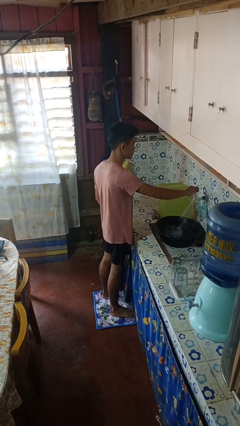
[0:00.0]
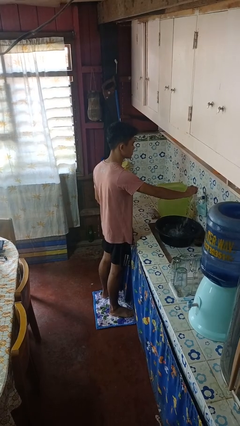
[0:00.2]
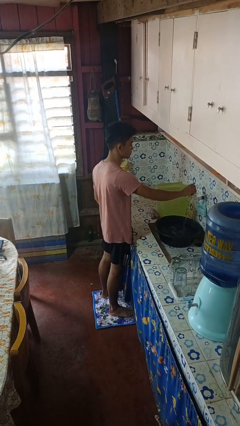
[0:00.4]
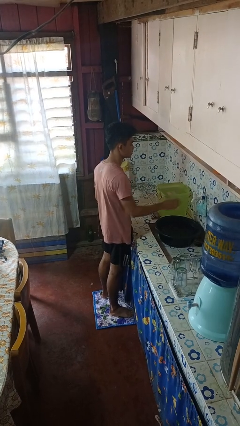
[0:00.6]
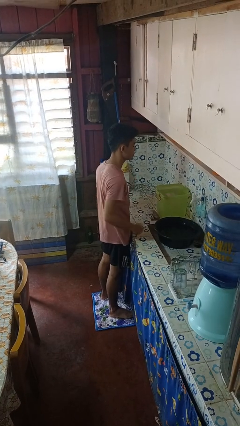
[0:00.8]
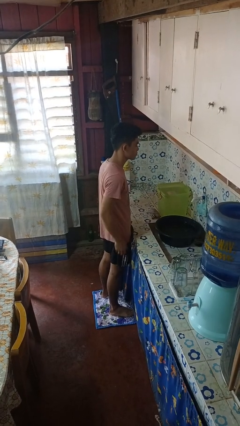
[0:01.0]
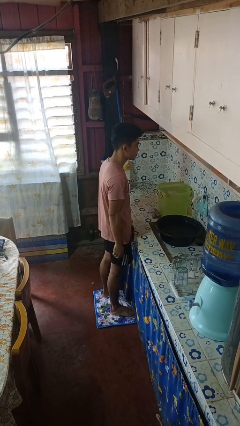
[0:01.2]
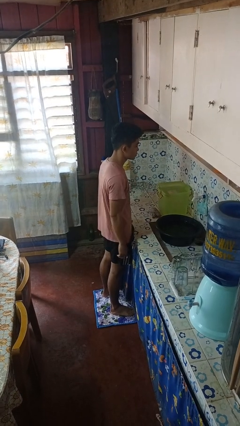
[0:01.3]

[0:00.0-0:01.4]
person turns off faucet

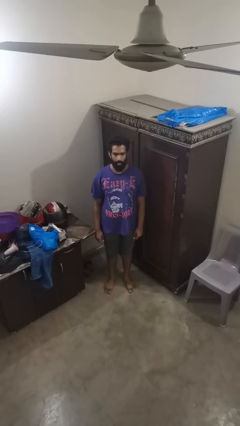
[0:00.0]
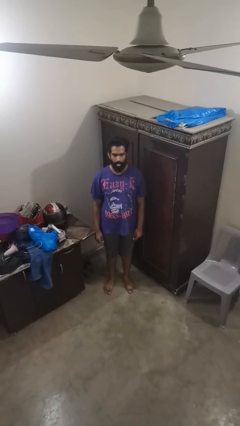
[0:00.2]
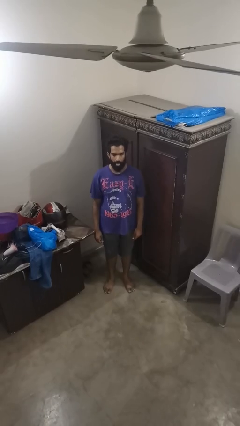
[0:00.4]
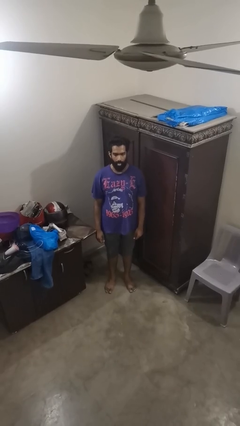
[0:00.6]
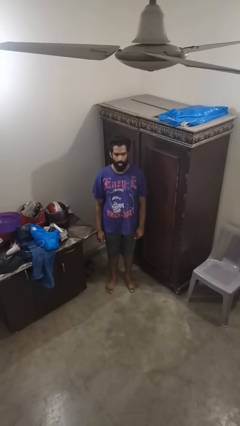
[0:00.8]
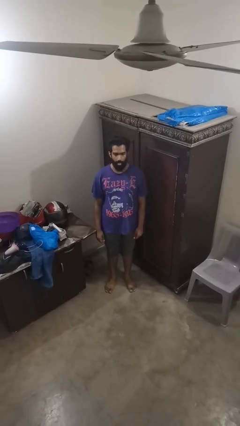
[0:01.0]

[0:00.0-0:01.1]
person sticks out tongue

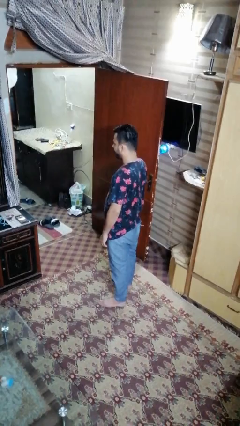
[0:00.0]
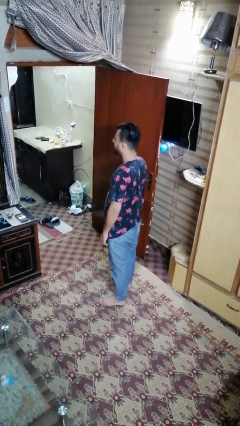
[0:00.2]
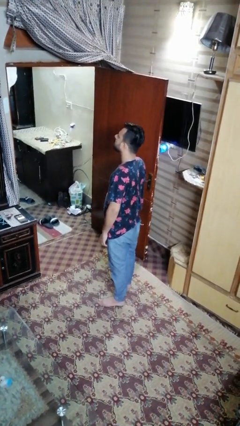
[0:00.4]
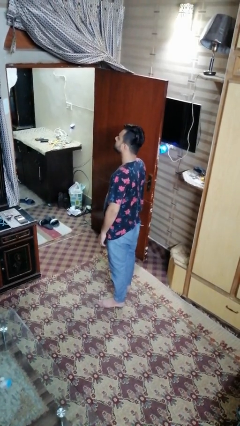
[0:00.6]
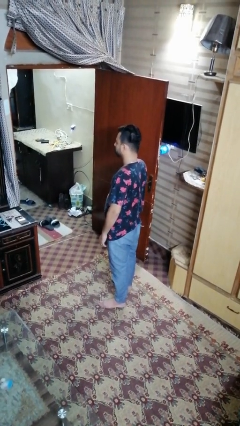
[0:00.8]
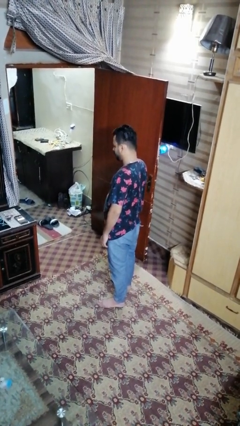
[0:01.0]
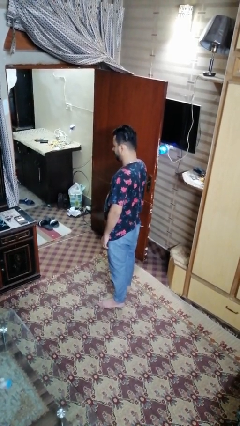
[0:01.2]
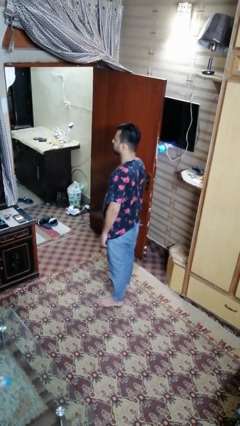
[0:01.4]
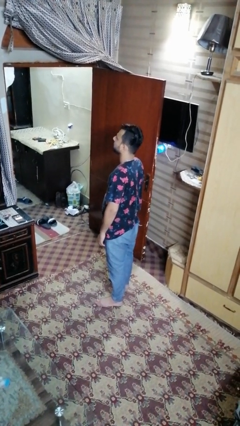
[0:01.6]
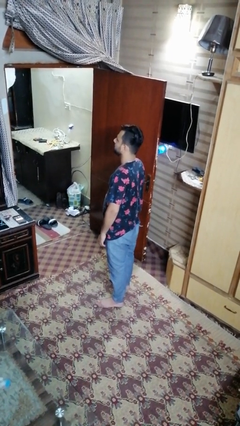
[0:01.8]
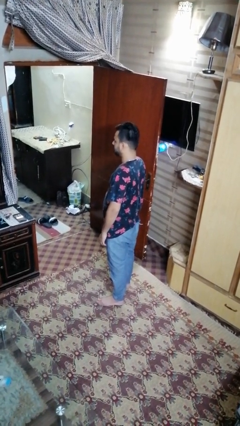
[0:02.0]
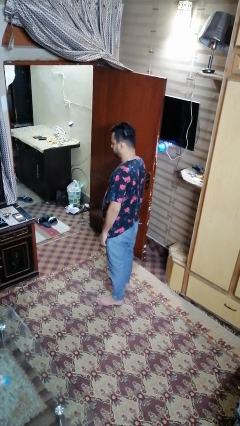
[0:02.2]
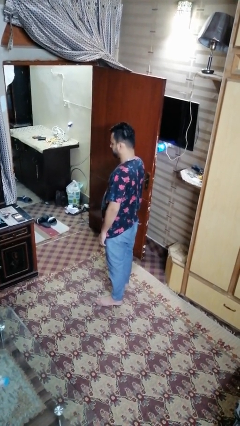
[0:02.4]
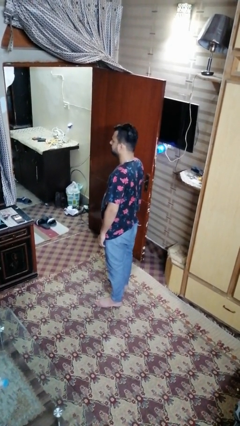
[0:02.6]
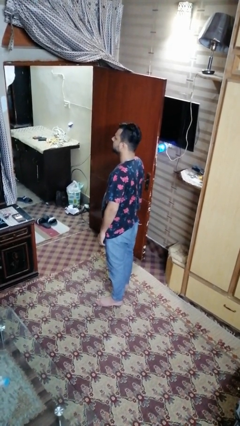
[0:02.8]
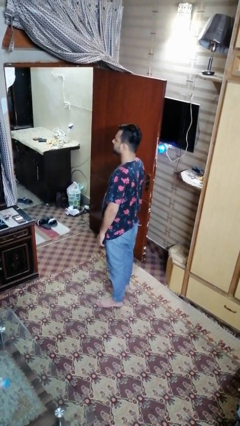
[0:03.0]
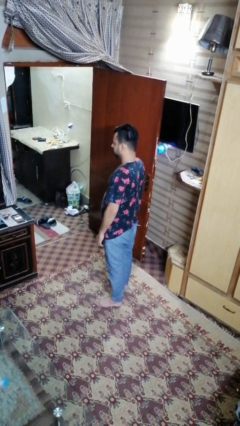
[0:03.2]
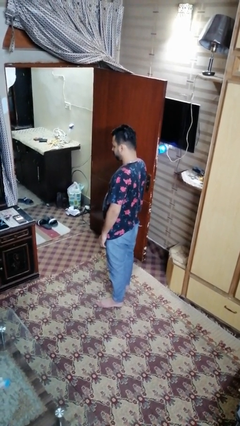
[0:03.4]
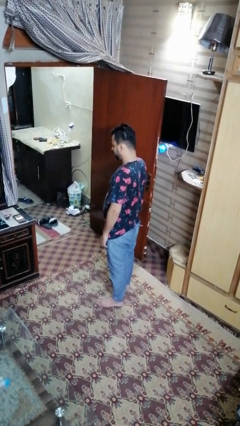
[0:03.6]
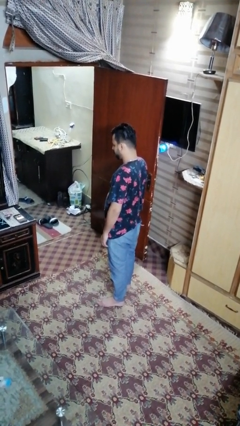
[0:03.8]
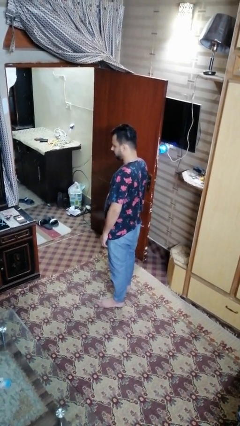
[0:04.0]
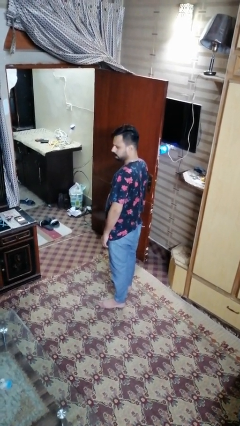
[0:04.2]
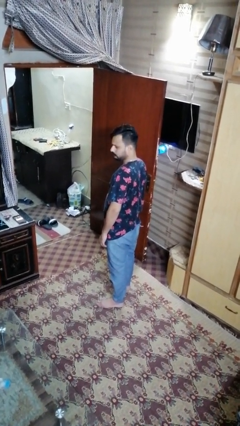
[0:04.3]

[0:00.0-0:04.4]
person nods head

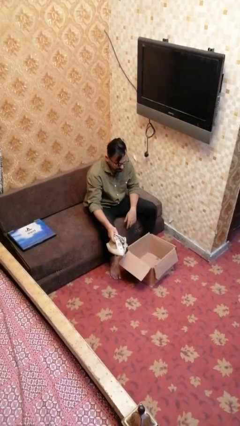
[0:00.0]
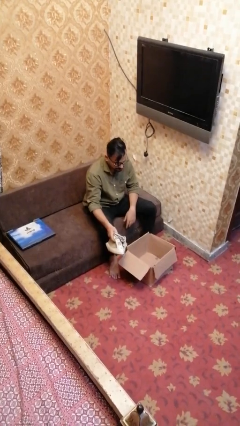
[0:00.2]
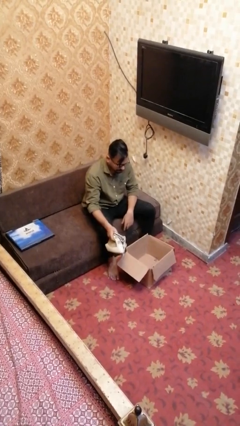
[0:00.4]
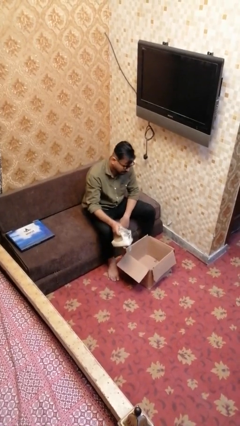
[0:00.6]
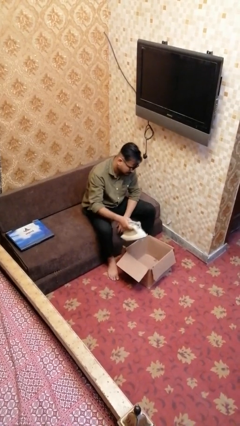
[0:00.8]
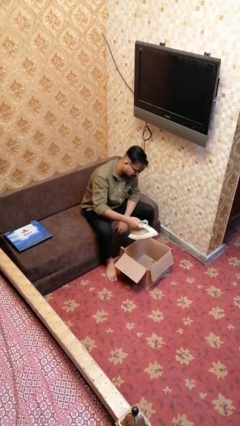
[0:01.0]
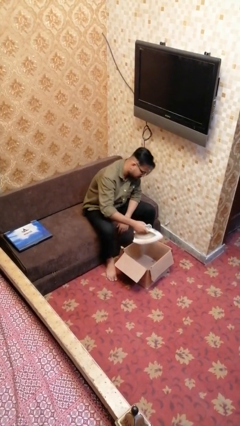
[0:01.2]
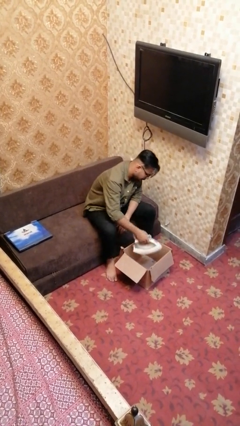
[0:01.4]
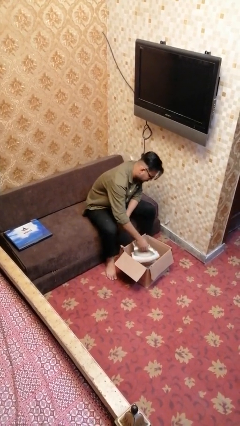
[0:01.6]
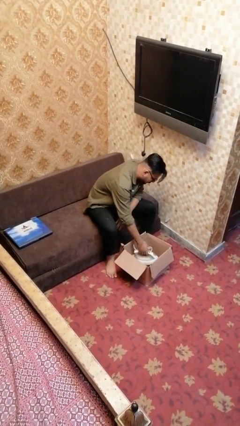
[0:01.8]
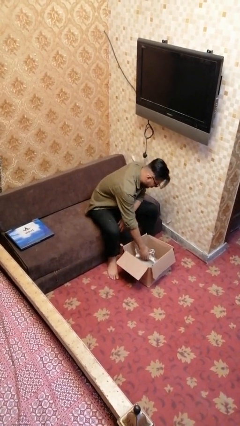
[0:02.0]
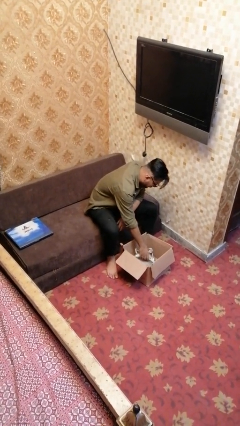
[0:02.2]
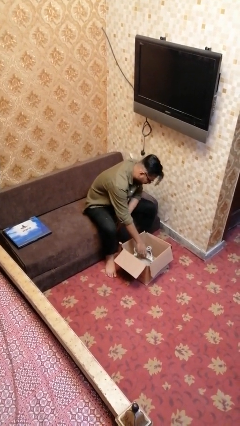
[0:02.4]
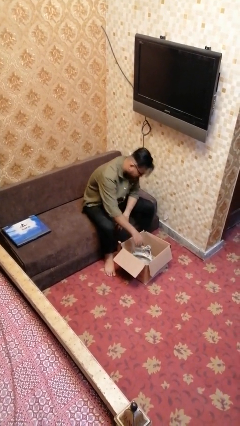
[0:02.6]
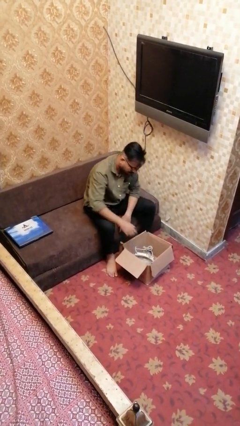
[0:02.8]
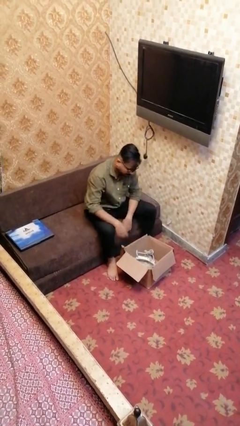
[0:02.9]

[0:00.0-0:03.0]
person puts object into box

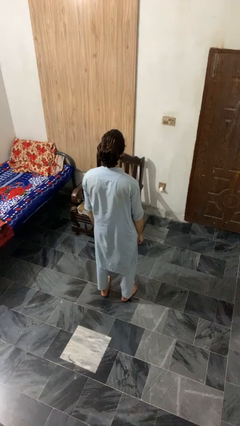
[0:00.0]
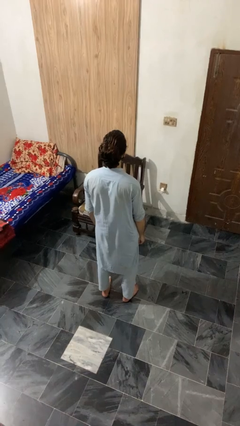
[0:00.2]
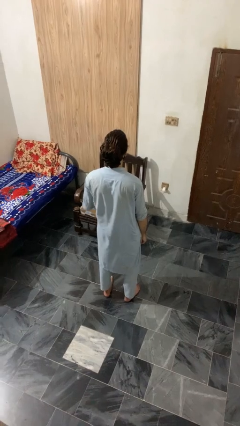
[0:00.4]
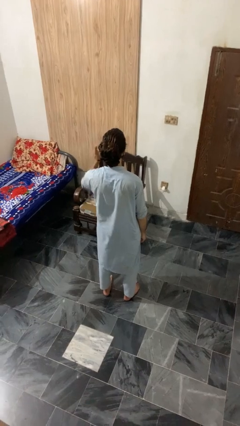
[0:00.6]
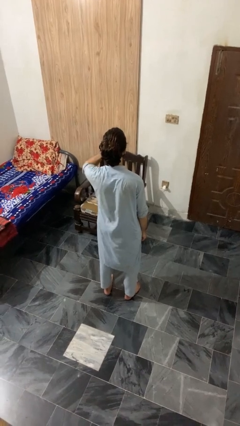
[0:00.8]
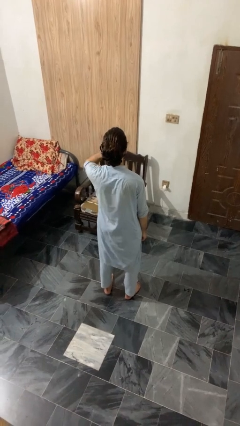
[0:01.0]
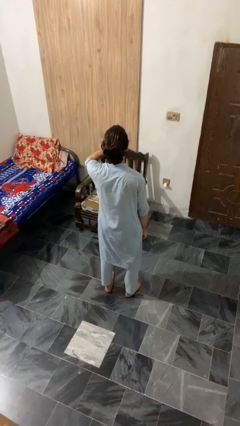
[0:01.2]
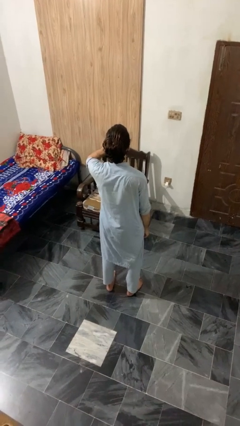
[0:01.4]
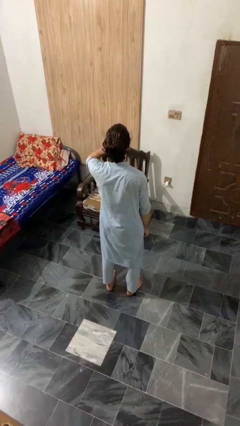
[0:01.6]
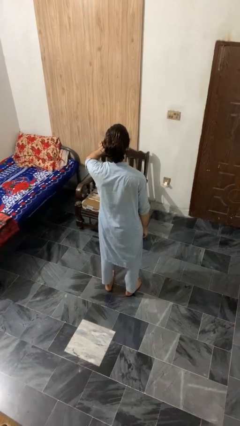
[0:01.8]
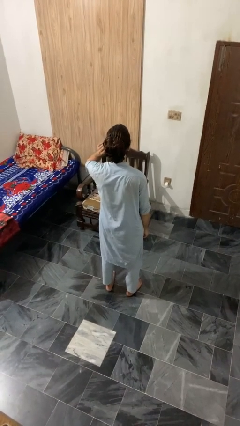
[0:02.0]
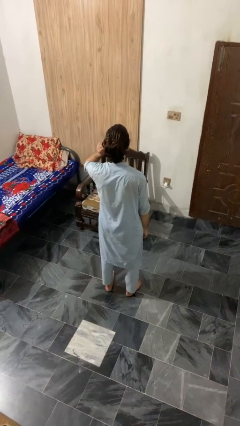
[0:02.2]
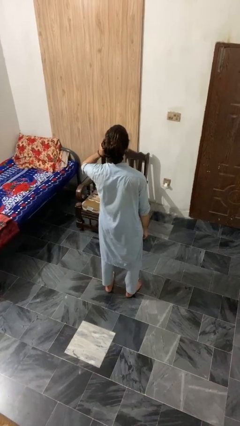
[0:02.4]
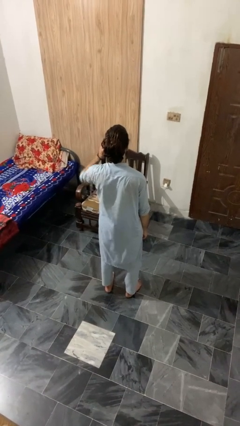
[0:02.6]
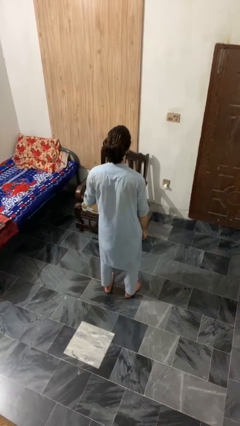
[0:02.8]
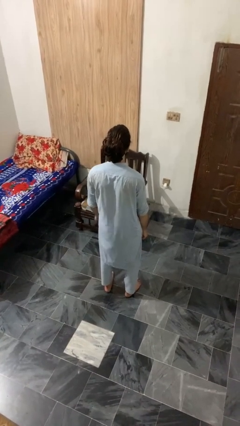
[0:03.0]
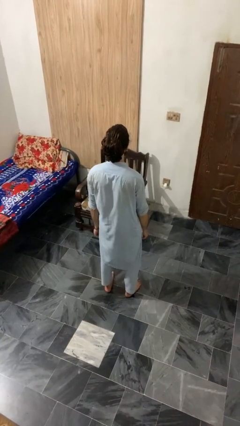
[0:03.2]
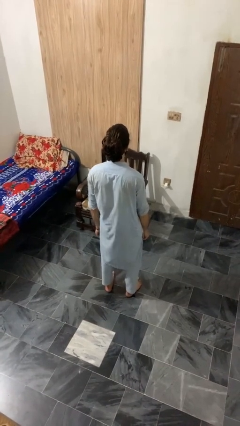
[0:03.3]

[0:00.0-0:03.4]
person touches earlobe

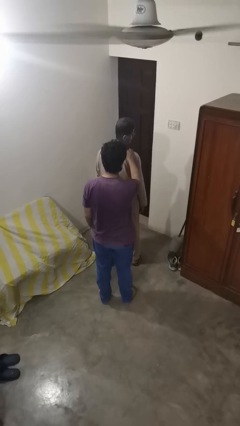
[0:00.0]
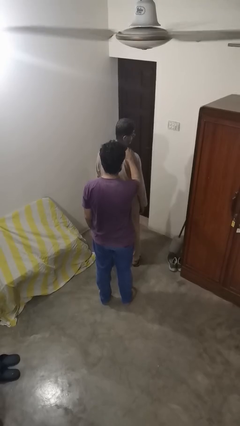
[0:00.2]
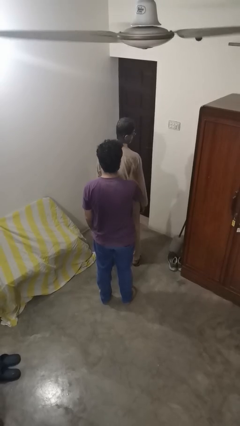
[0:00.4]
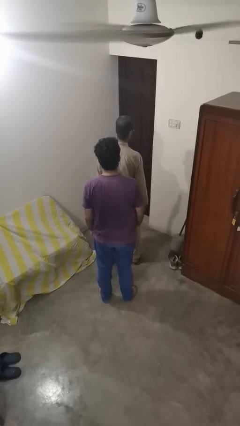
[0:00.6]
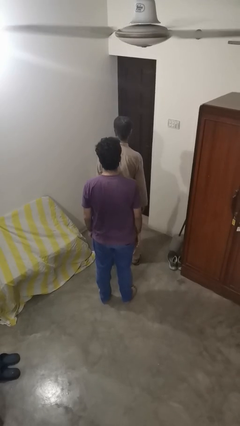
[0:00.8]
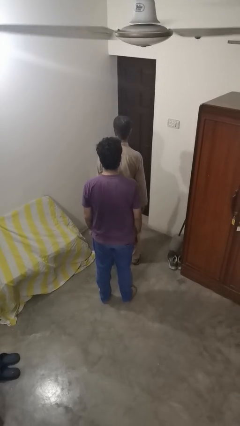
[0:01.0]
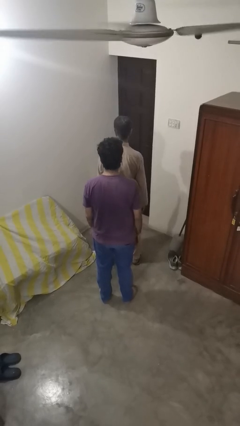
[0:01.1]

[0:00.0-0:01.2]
person spins person around

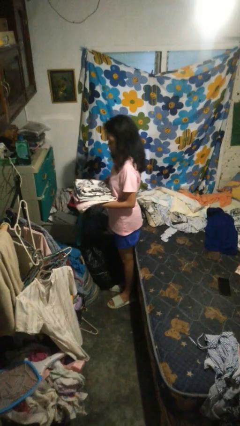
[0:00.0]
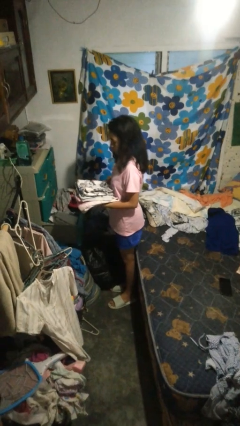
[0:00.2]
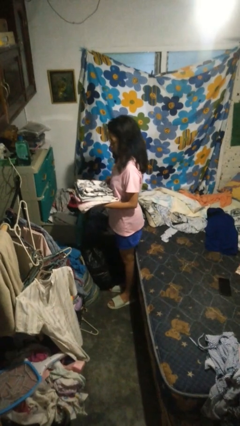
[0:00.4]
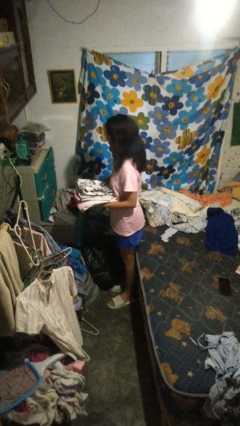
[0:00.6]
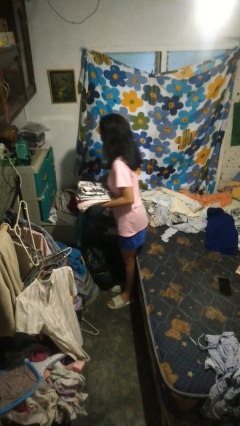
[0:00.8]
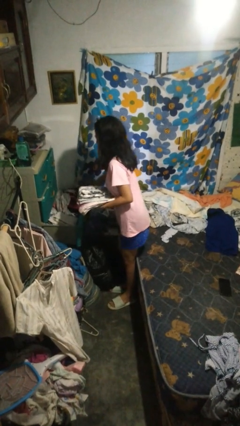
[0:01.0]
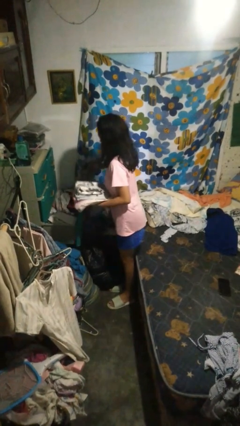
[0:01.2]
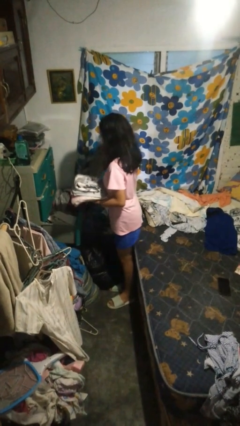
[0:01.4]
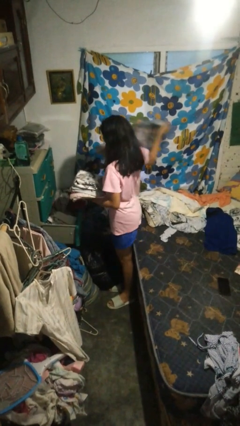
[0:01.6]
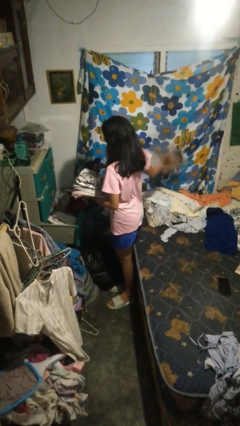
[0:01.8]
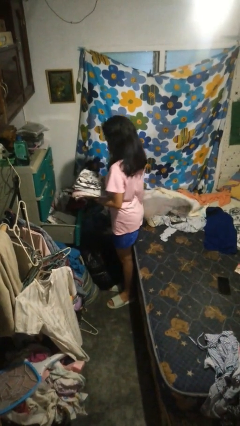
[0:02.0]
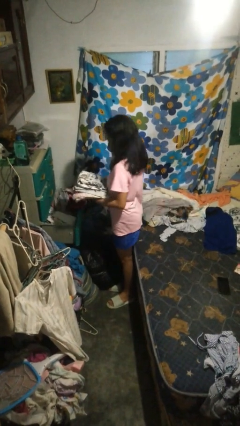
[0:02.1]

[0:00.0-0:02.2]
person takes clothes from dresser
